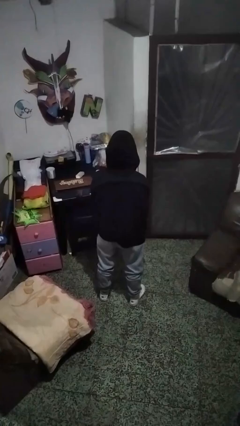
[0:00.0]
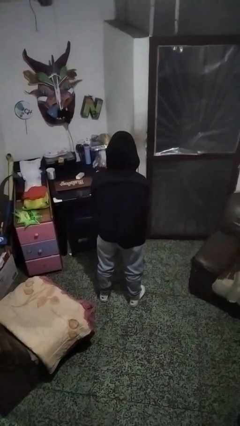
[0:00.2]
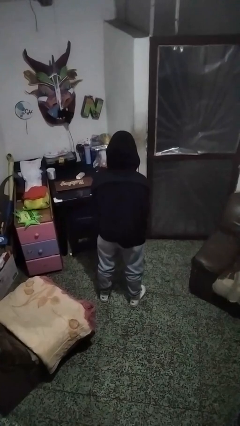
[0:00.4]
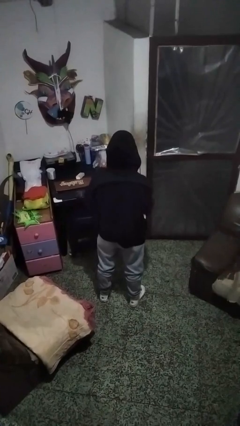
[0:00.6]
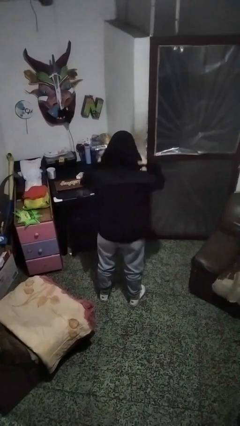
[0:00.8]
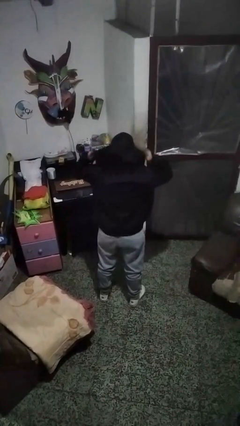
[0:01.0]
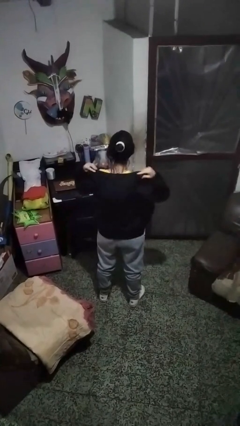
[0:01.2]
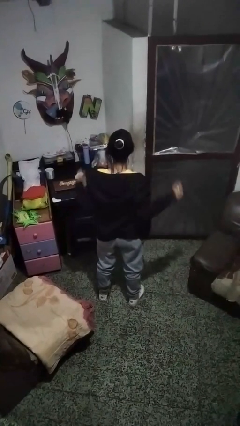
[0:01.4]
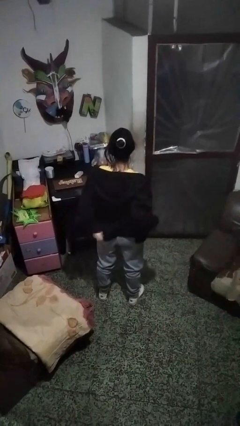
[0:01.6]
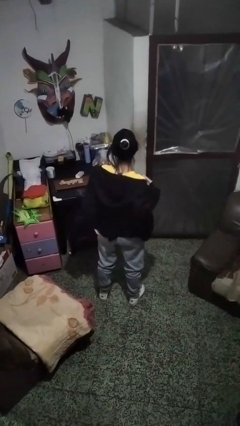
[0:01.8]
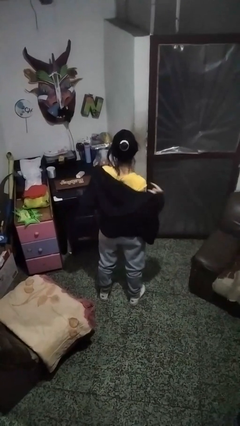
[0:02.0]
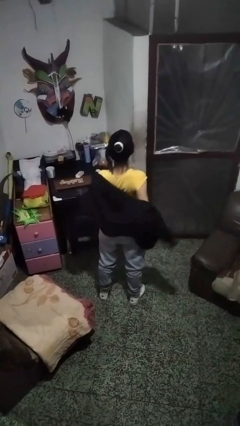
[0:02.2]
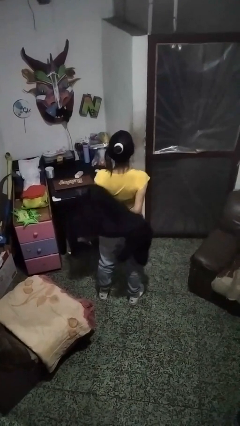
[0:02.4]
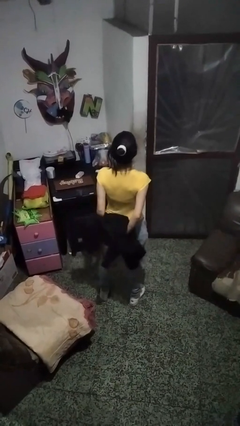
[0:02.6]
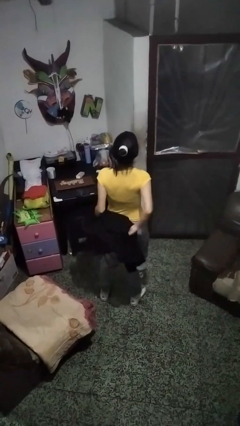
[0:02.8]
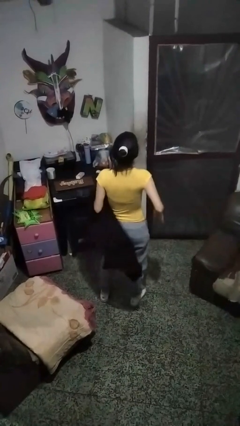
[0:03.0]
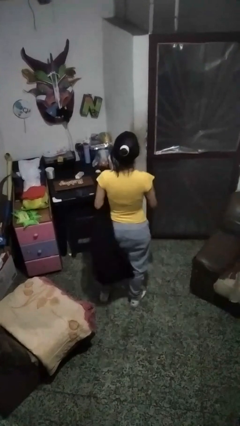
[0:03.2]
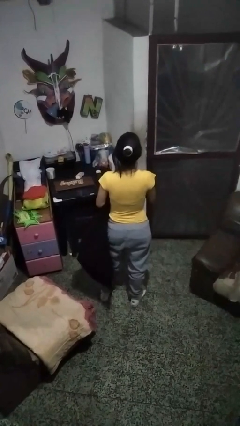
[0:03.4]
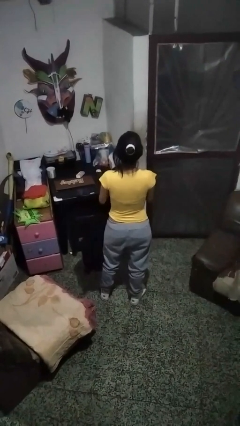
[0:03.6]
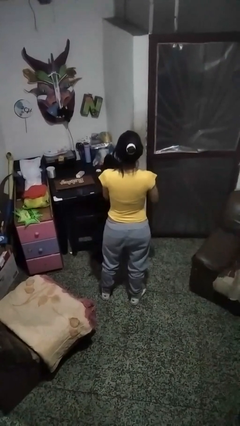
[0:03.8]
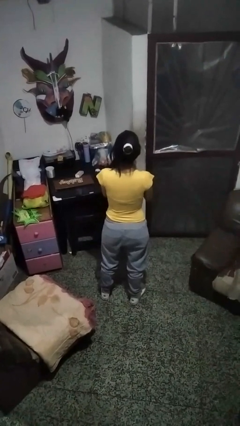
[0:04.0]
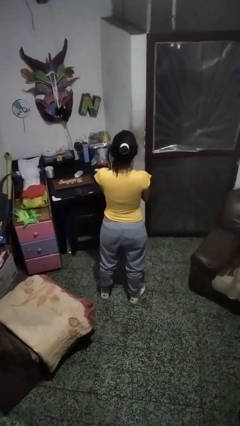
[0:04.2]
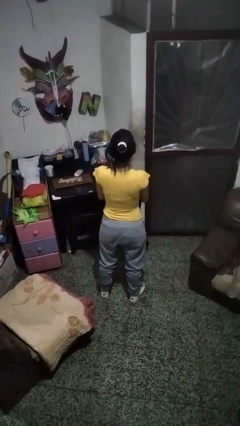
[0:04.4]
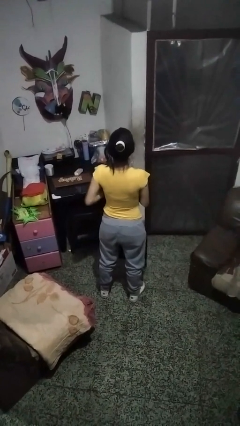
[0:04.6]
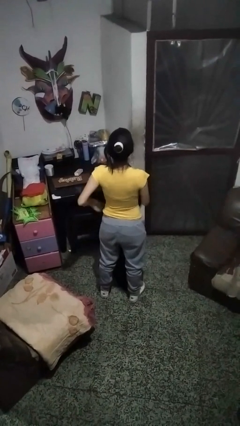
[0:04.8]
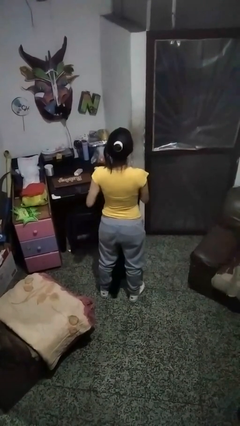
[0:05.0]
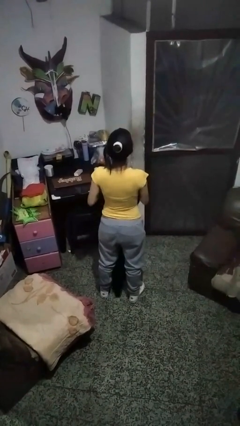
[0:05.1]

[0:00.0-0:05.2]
person takes off hoodie

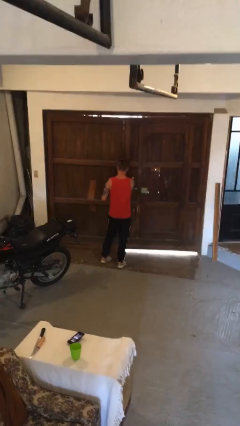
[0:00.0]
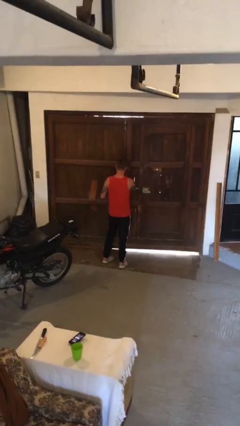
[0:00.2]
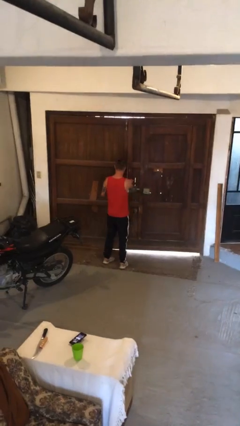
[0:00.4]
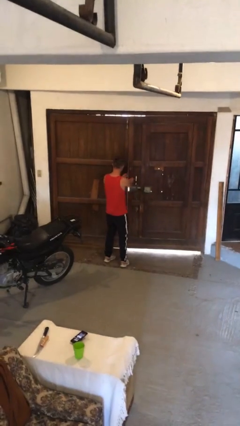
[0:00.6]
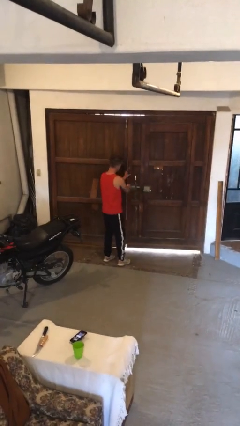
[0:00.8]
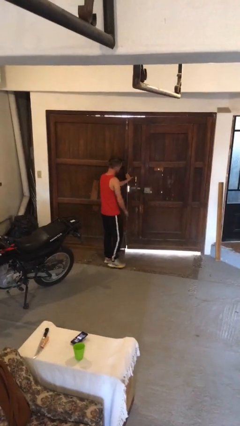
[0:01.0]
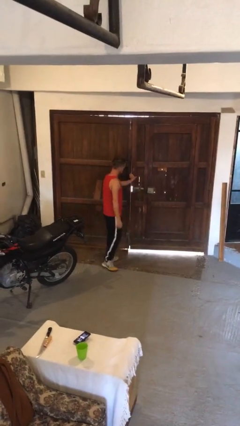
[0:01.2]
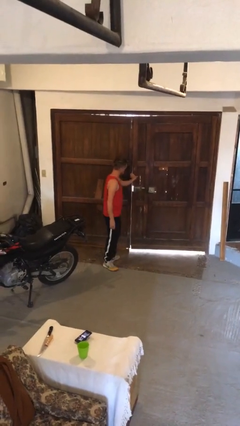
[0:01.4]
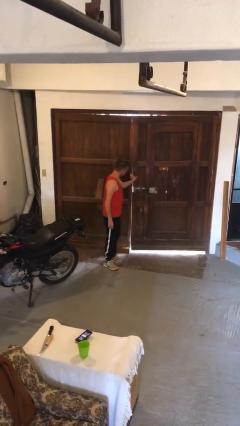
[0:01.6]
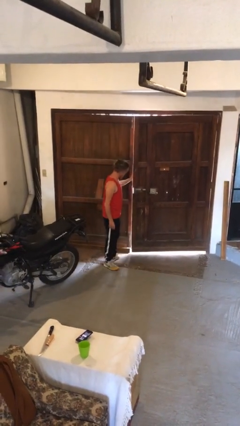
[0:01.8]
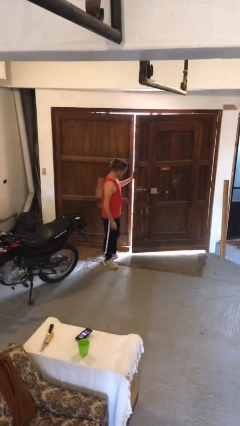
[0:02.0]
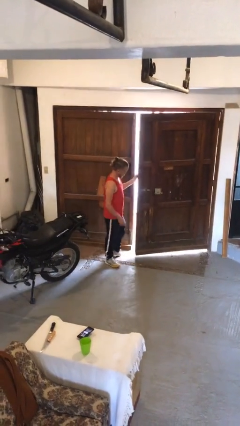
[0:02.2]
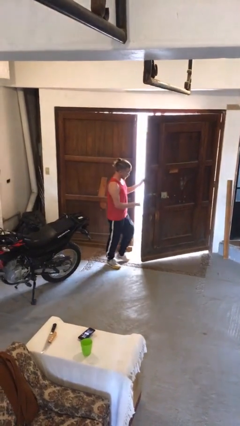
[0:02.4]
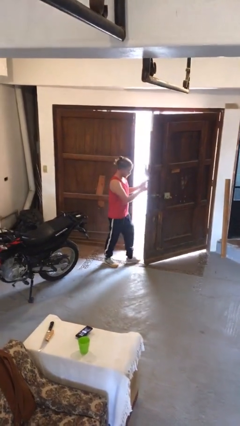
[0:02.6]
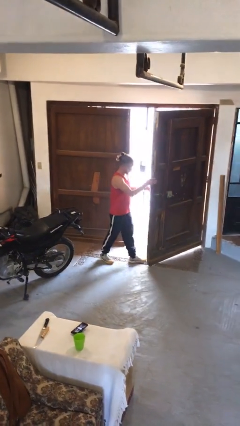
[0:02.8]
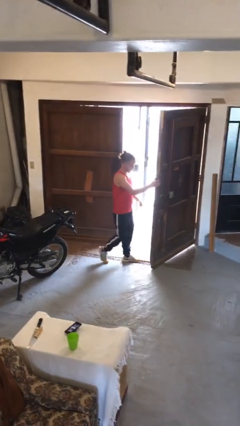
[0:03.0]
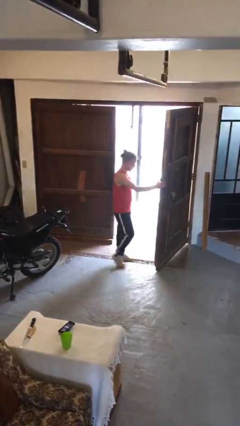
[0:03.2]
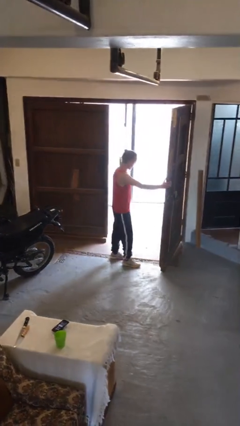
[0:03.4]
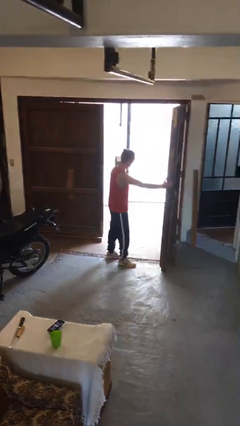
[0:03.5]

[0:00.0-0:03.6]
person opens gate

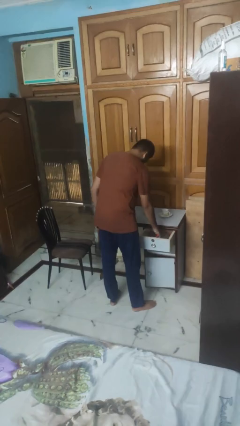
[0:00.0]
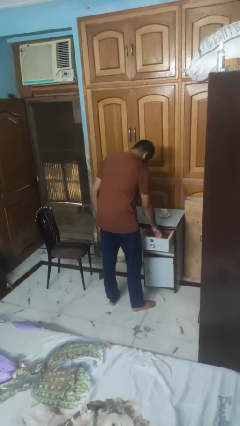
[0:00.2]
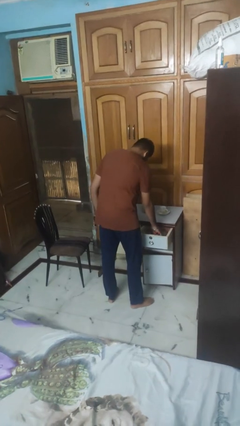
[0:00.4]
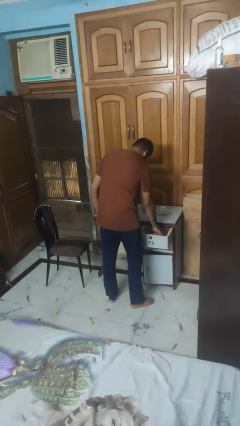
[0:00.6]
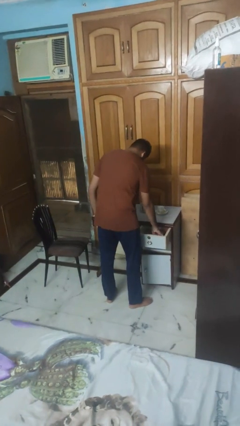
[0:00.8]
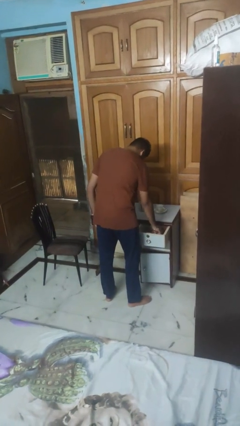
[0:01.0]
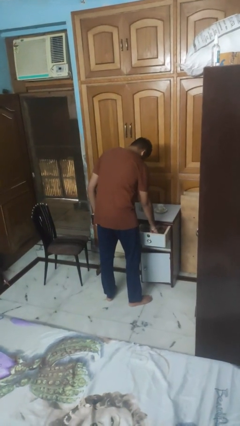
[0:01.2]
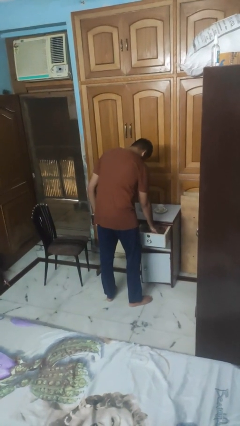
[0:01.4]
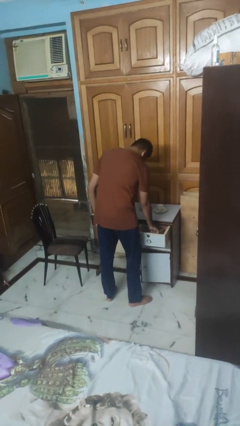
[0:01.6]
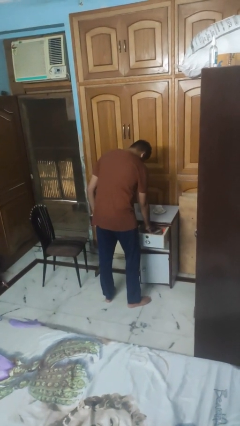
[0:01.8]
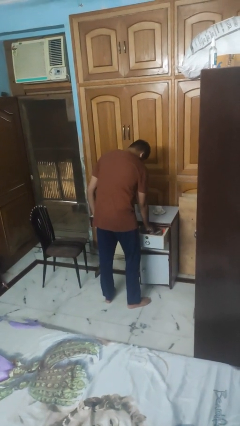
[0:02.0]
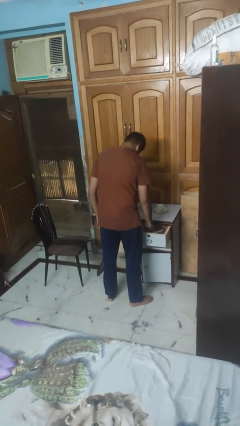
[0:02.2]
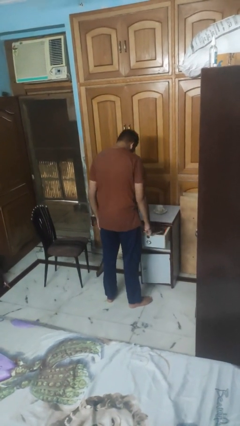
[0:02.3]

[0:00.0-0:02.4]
person searches in kitchen drawer

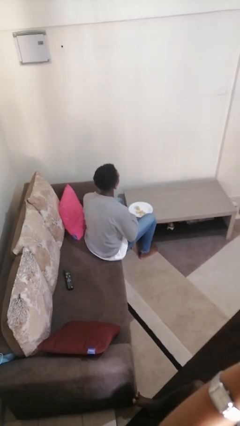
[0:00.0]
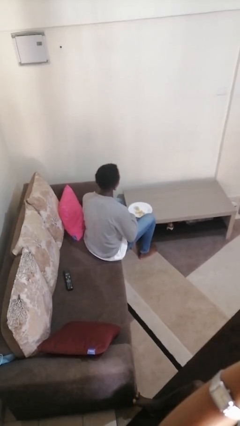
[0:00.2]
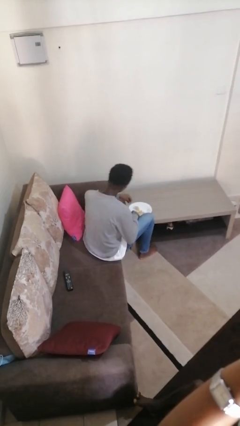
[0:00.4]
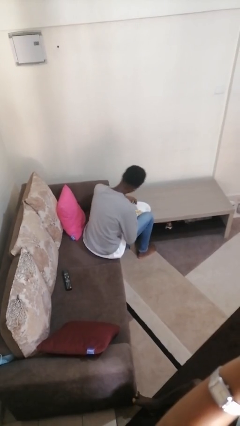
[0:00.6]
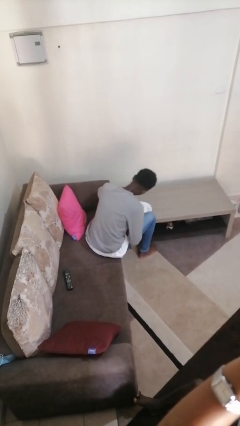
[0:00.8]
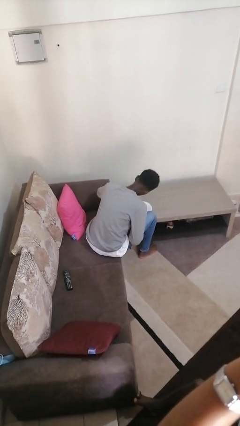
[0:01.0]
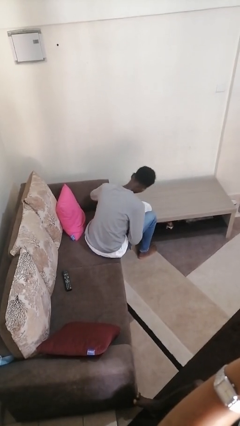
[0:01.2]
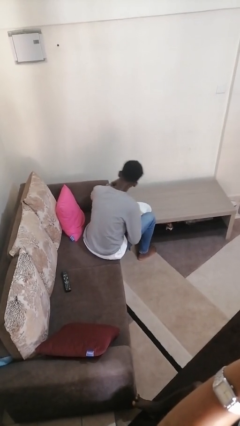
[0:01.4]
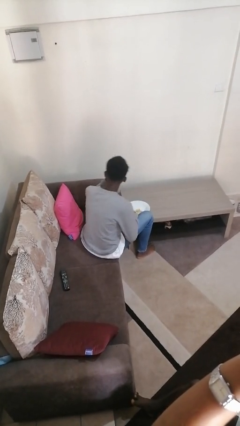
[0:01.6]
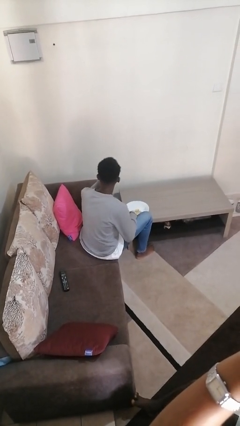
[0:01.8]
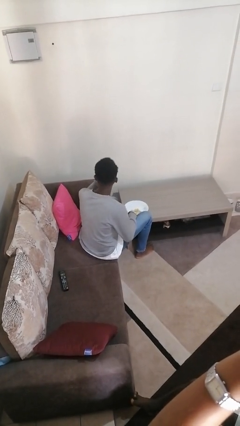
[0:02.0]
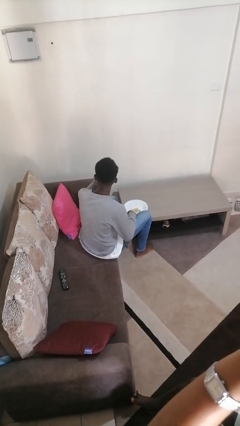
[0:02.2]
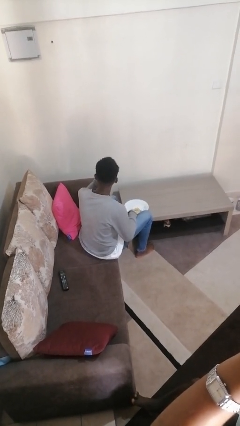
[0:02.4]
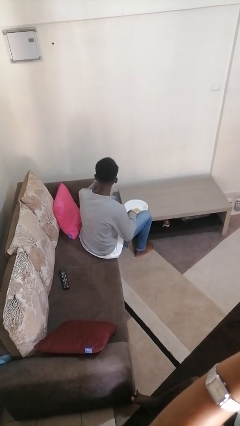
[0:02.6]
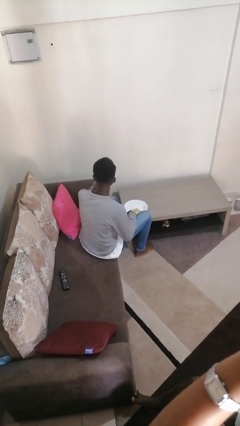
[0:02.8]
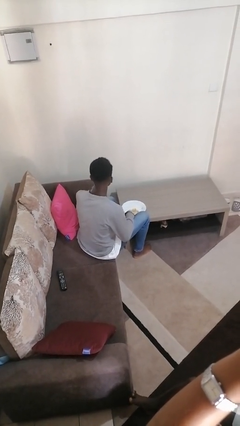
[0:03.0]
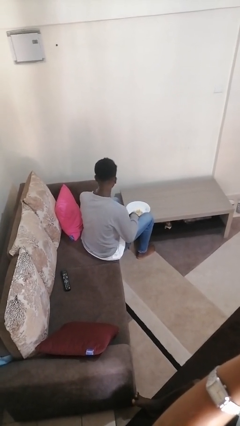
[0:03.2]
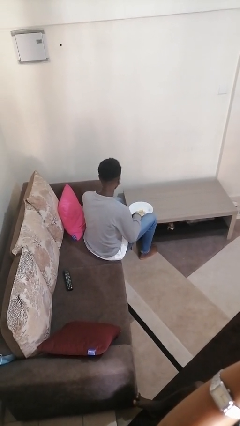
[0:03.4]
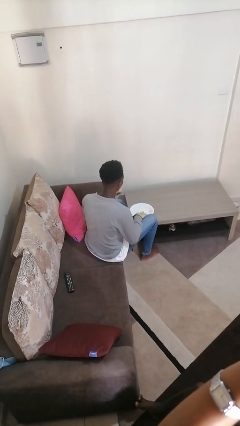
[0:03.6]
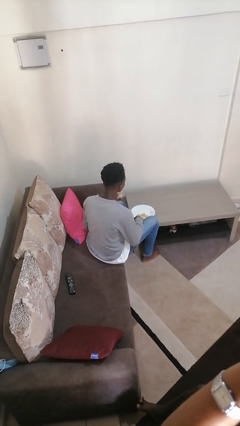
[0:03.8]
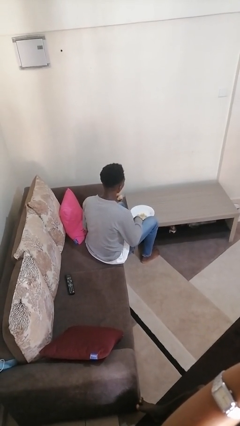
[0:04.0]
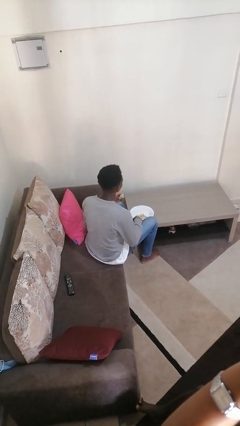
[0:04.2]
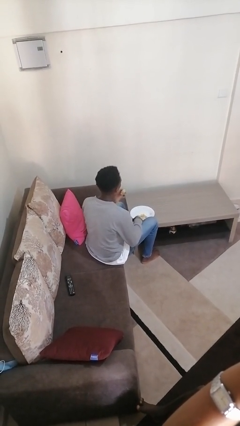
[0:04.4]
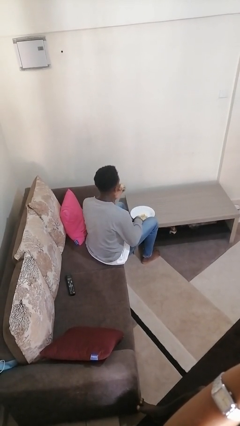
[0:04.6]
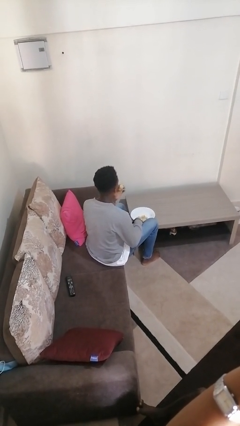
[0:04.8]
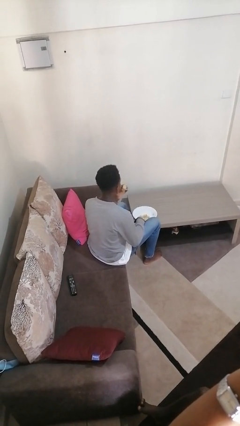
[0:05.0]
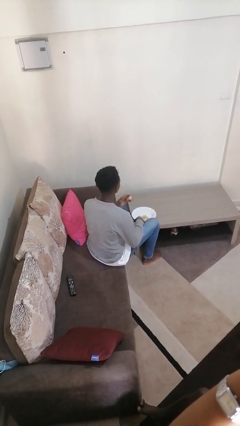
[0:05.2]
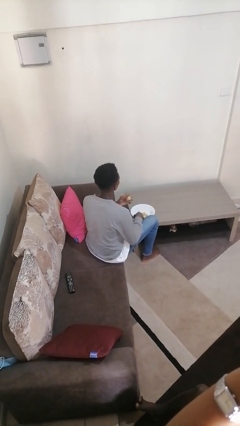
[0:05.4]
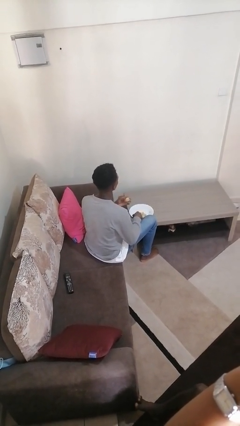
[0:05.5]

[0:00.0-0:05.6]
person eats with hands

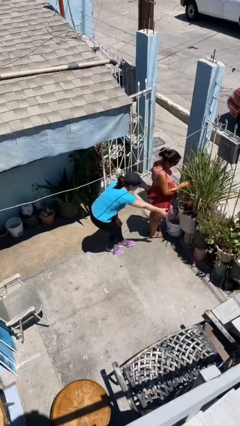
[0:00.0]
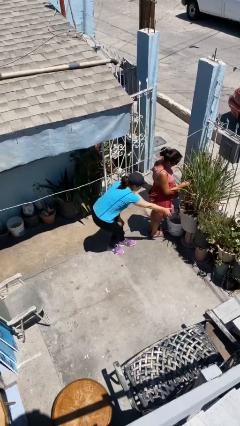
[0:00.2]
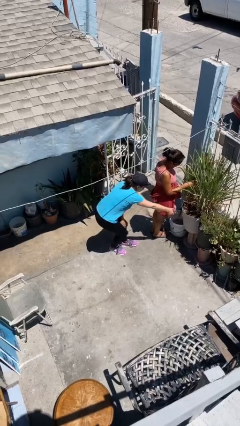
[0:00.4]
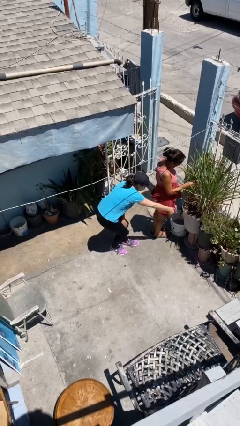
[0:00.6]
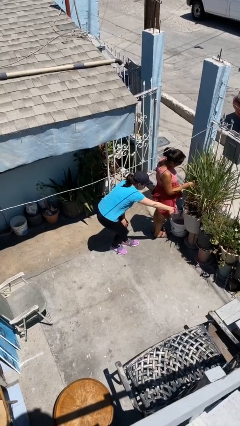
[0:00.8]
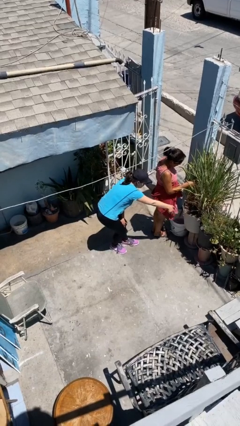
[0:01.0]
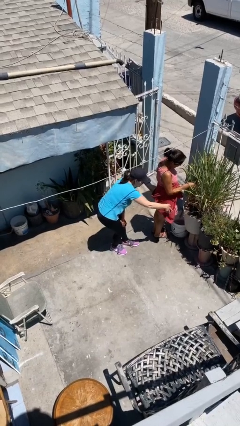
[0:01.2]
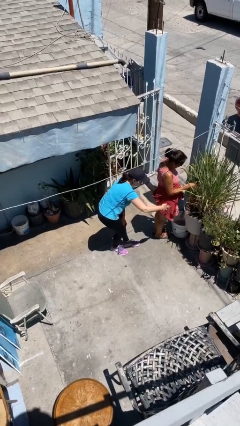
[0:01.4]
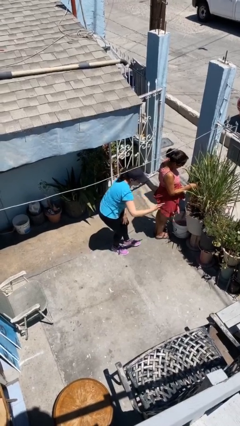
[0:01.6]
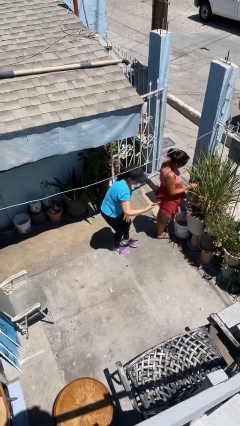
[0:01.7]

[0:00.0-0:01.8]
person steals object from person
